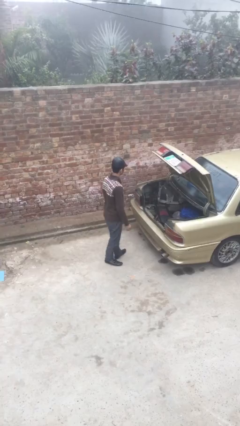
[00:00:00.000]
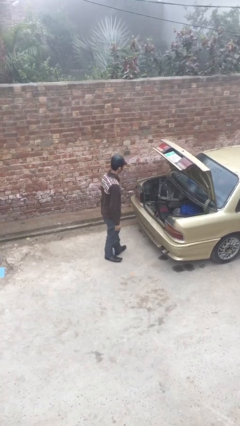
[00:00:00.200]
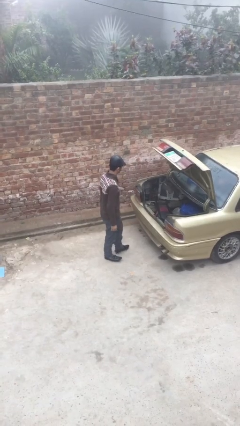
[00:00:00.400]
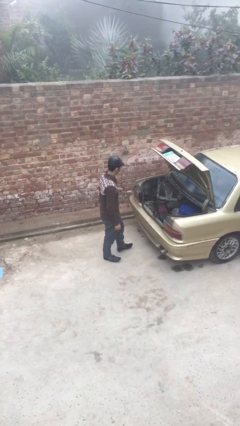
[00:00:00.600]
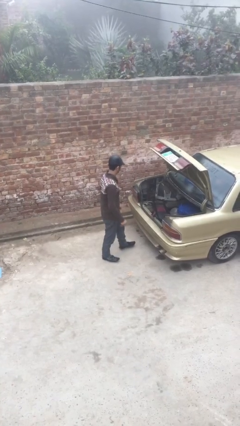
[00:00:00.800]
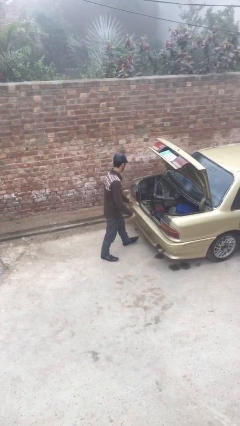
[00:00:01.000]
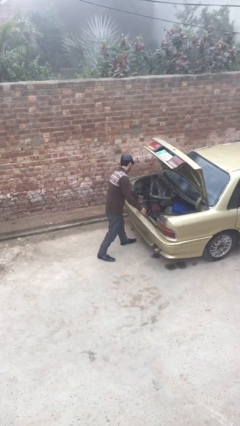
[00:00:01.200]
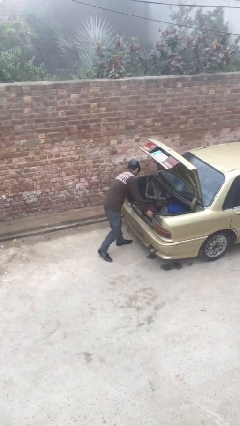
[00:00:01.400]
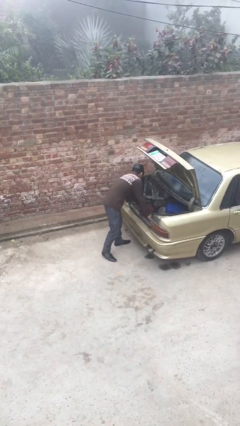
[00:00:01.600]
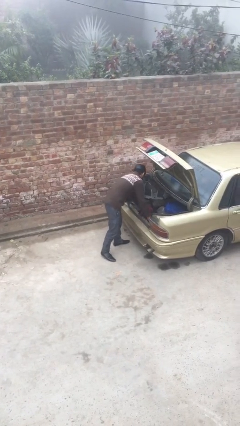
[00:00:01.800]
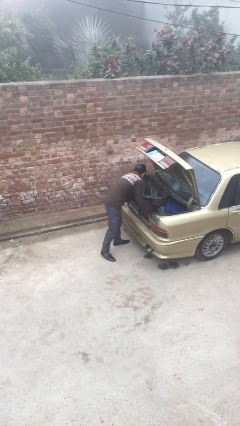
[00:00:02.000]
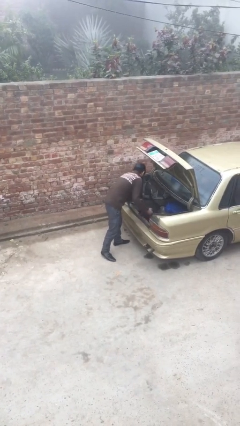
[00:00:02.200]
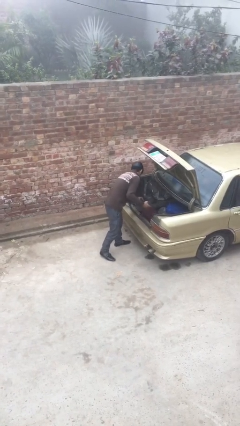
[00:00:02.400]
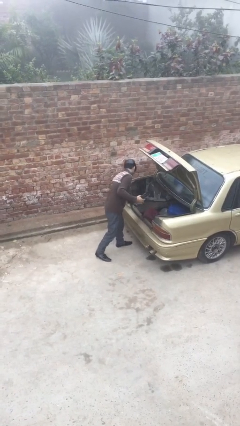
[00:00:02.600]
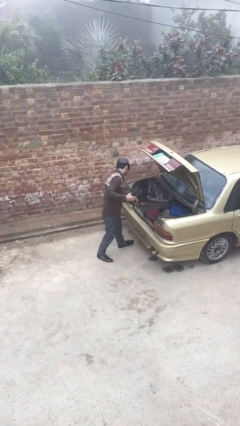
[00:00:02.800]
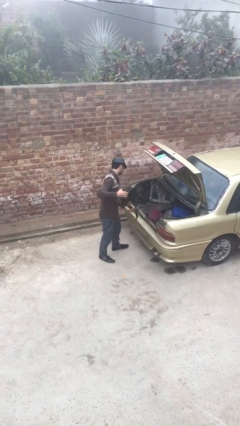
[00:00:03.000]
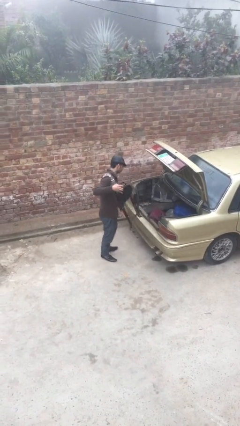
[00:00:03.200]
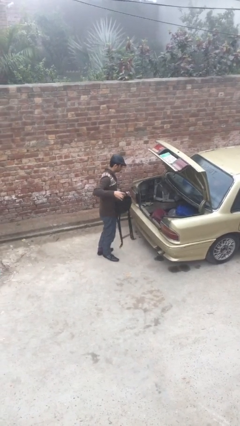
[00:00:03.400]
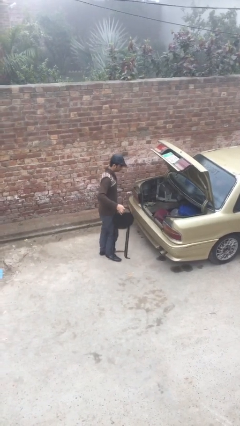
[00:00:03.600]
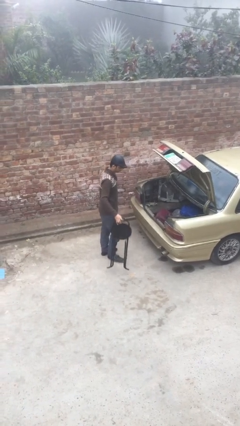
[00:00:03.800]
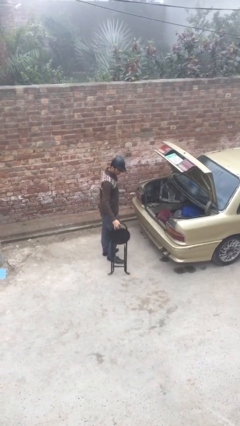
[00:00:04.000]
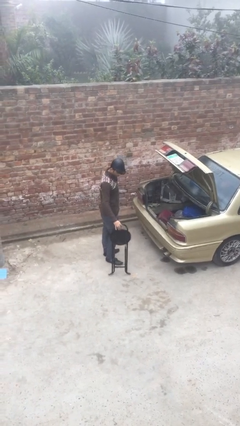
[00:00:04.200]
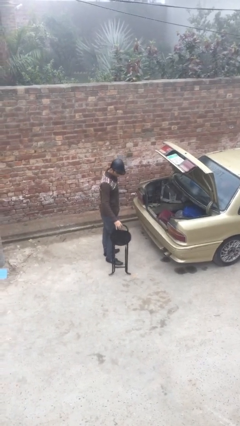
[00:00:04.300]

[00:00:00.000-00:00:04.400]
person unloads car

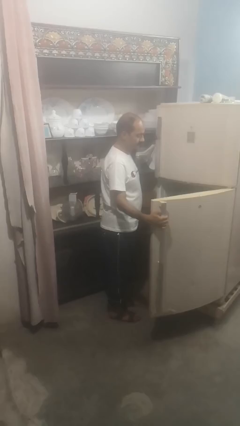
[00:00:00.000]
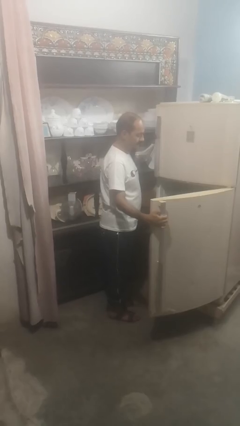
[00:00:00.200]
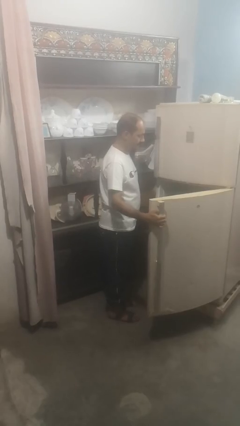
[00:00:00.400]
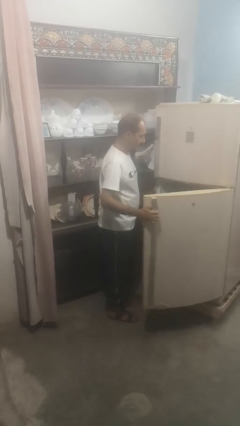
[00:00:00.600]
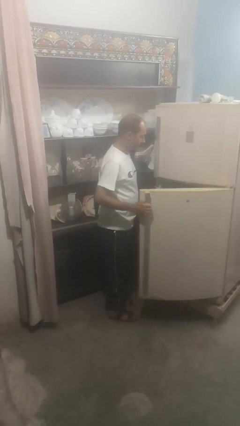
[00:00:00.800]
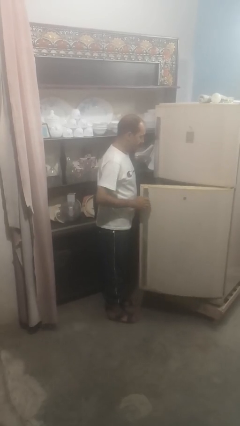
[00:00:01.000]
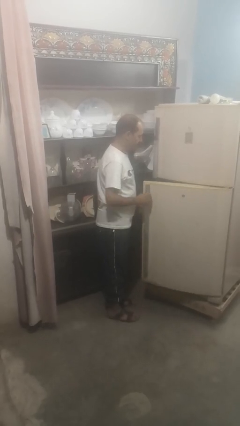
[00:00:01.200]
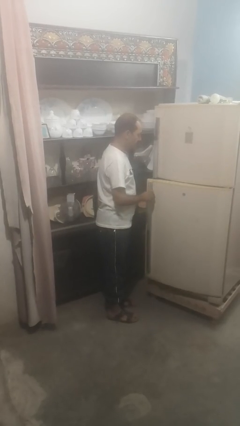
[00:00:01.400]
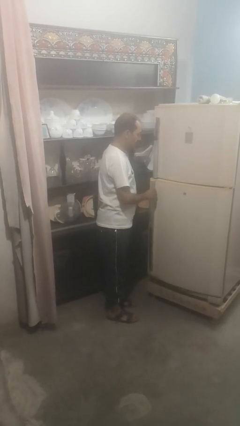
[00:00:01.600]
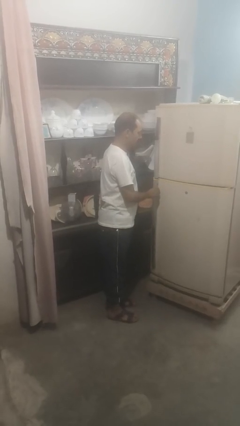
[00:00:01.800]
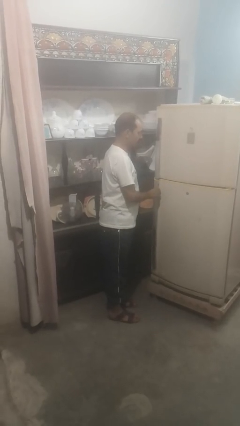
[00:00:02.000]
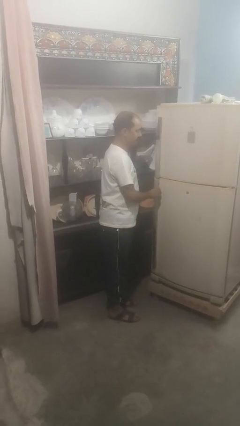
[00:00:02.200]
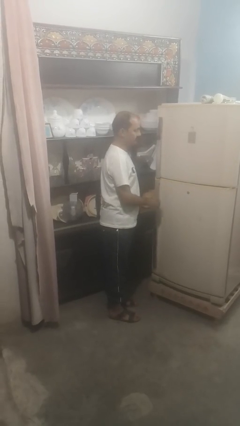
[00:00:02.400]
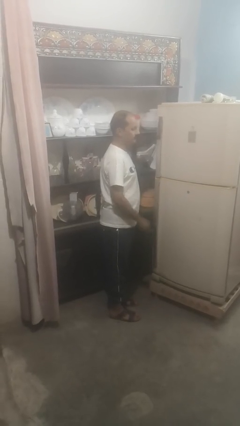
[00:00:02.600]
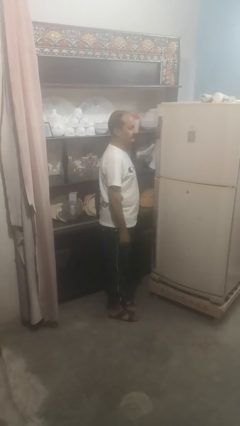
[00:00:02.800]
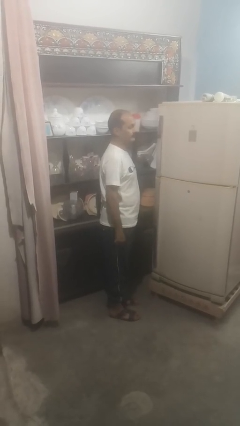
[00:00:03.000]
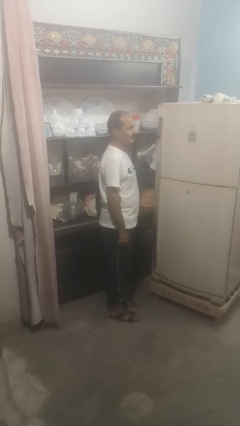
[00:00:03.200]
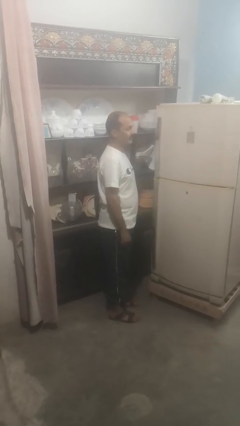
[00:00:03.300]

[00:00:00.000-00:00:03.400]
person closes refrigerator

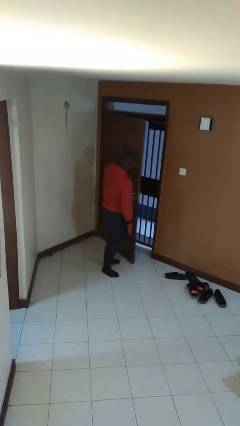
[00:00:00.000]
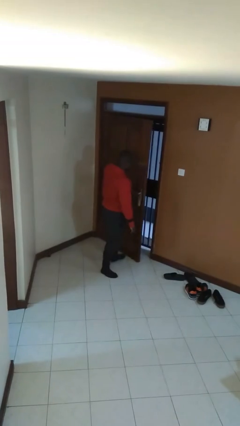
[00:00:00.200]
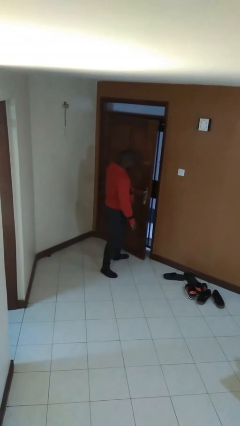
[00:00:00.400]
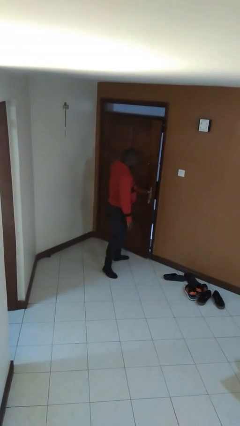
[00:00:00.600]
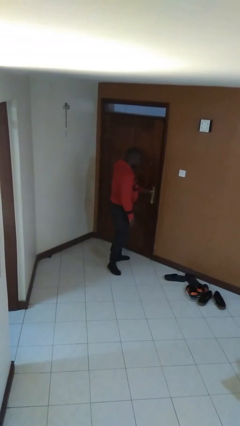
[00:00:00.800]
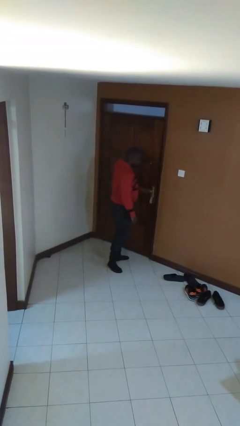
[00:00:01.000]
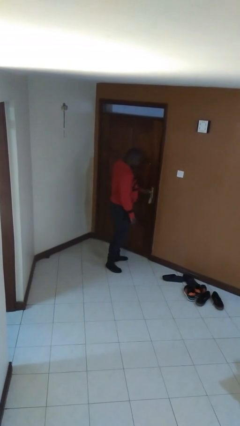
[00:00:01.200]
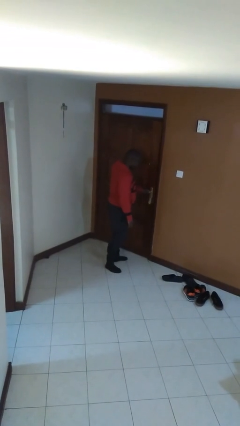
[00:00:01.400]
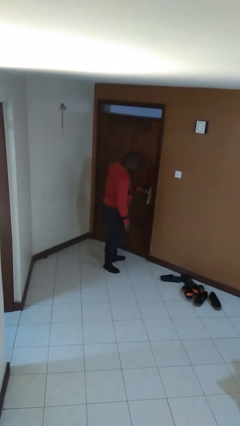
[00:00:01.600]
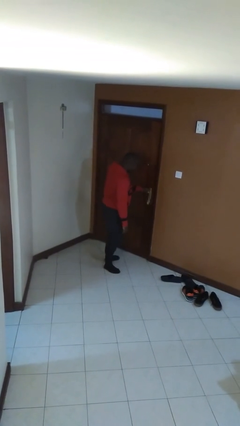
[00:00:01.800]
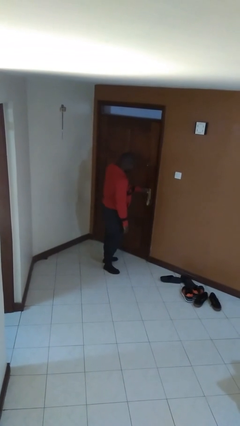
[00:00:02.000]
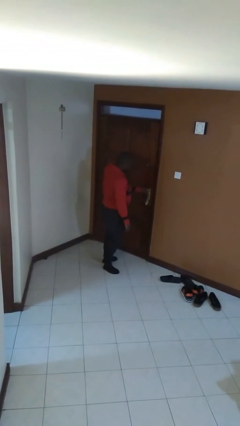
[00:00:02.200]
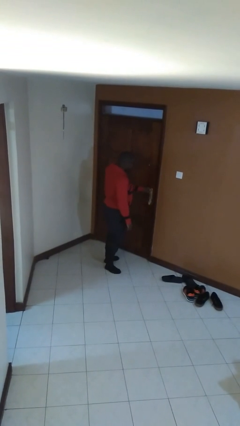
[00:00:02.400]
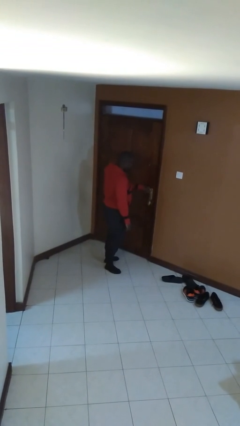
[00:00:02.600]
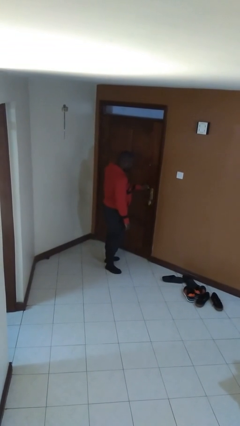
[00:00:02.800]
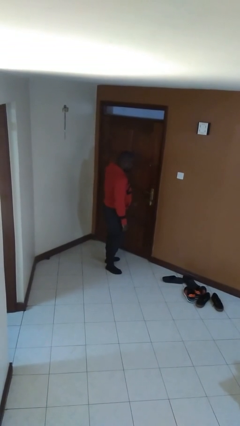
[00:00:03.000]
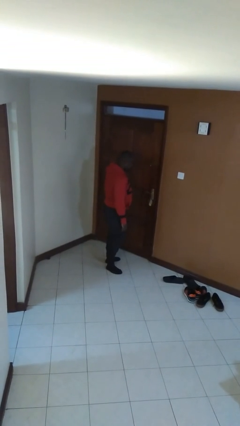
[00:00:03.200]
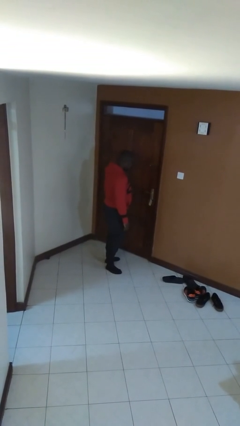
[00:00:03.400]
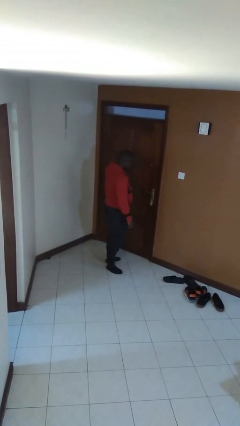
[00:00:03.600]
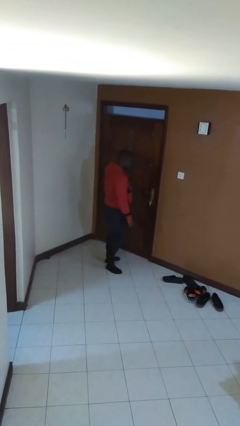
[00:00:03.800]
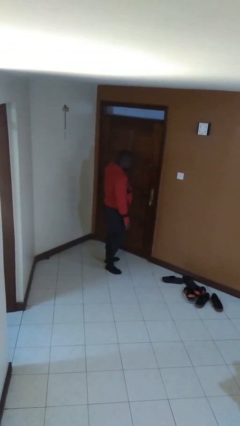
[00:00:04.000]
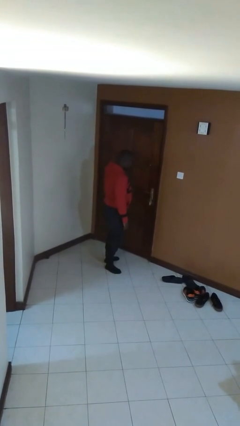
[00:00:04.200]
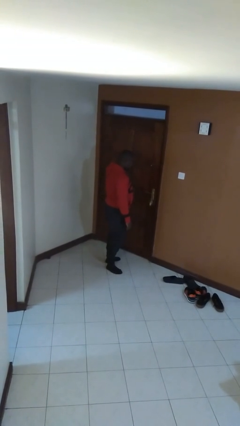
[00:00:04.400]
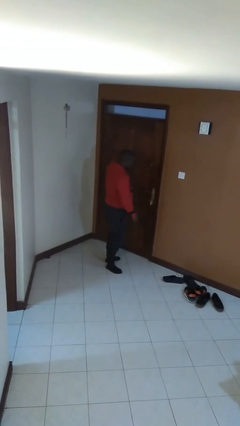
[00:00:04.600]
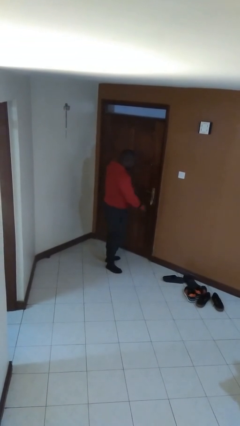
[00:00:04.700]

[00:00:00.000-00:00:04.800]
person closes facility door

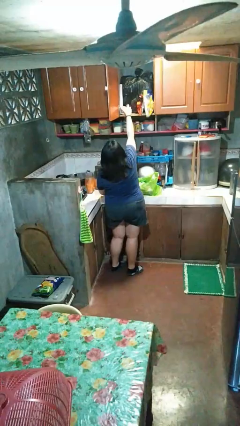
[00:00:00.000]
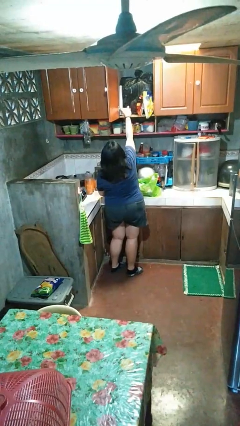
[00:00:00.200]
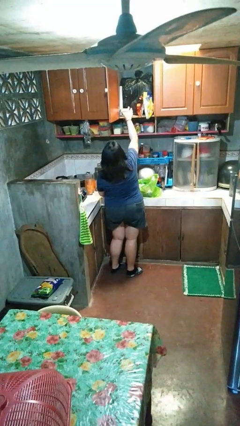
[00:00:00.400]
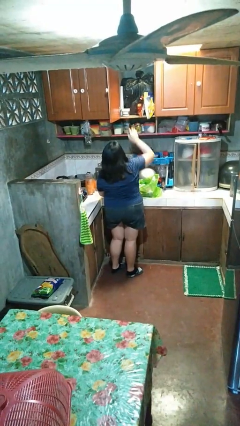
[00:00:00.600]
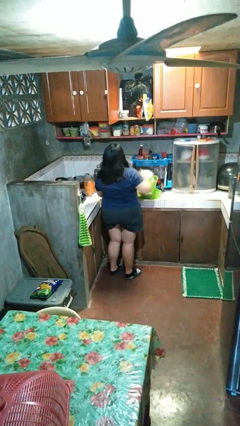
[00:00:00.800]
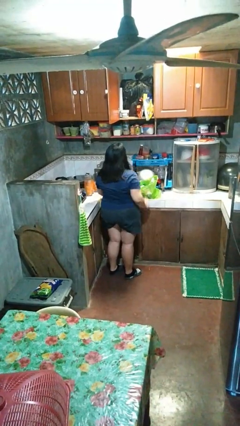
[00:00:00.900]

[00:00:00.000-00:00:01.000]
person loads groceries into cabinet

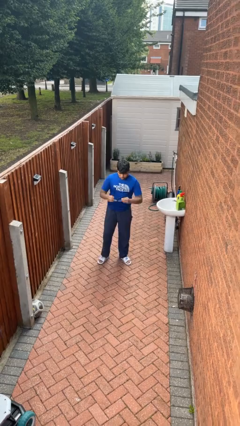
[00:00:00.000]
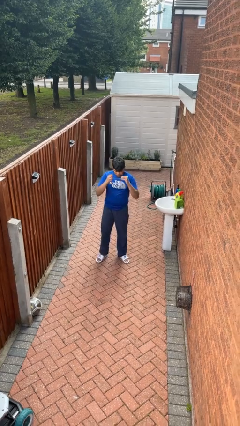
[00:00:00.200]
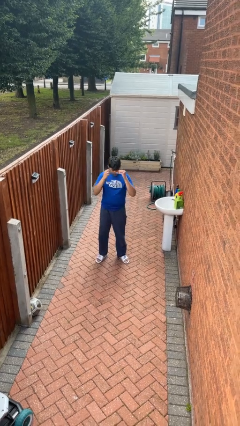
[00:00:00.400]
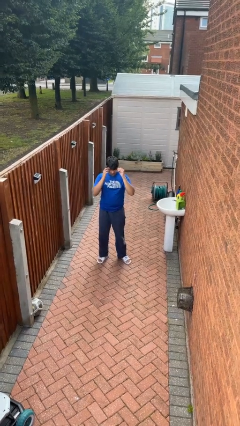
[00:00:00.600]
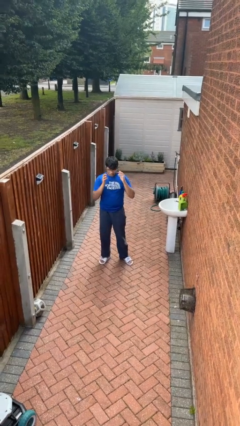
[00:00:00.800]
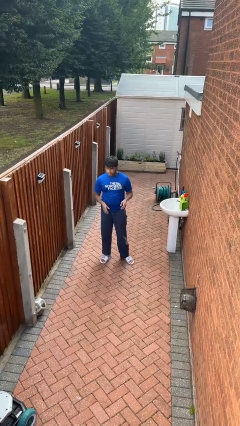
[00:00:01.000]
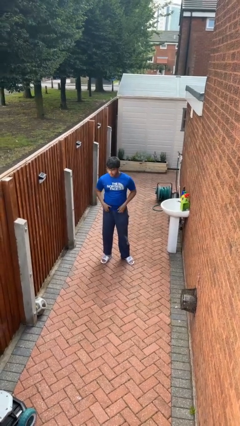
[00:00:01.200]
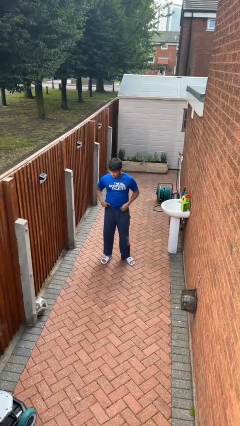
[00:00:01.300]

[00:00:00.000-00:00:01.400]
person puts on glasses

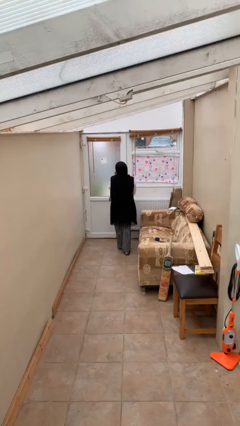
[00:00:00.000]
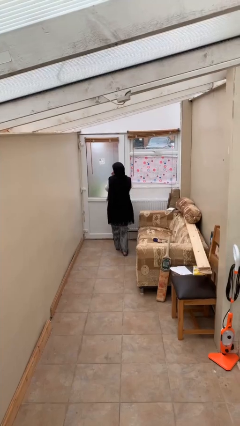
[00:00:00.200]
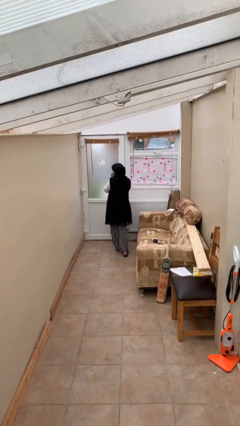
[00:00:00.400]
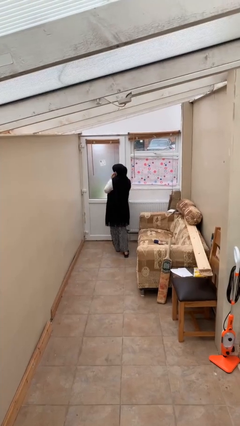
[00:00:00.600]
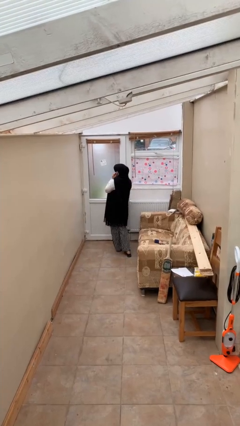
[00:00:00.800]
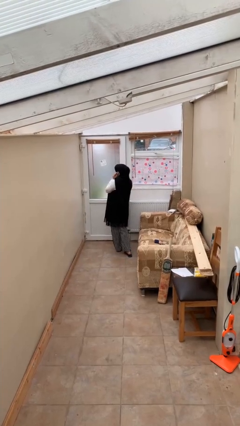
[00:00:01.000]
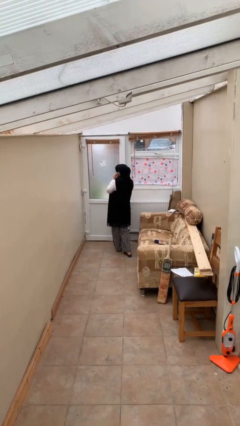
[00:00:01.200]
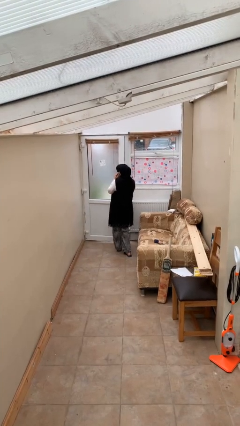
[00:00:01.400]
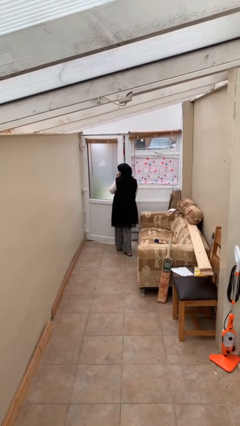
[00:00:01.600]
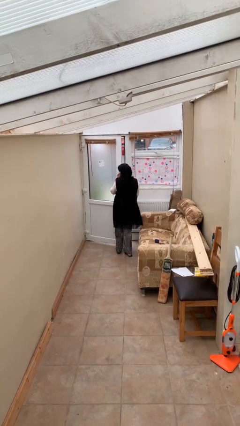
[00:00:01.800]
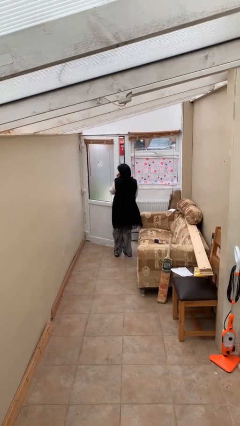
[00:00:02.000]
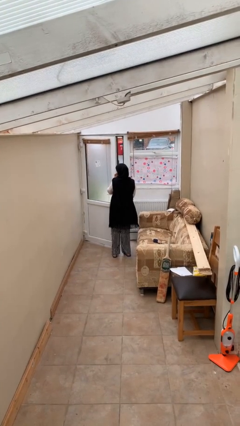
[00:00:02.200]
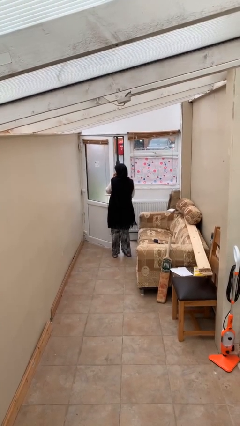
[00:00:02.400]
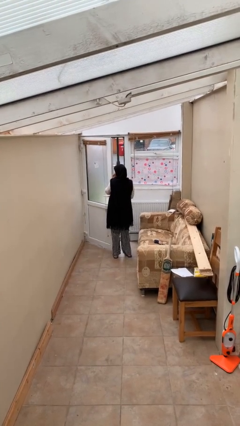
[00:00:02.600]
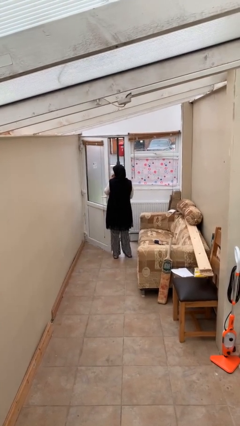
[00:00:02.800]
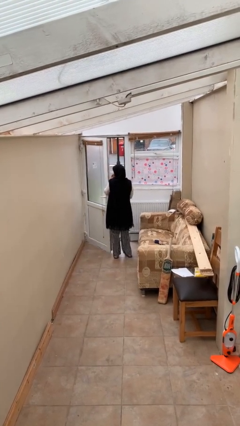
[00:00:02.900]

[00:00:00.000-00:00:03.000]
person opens facility door
